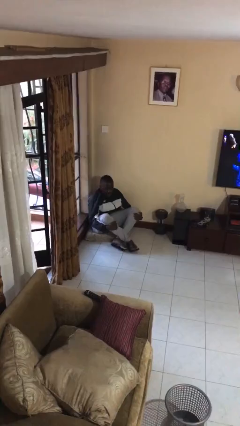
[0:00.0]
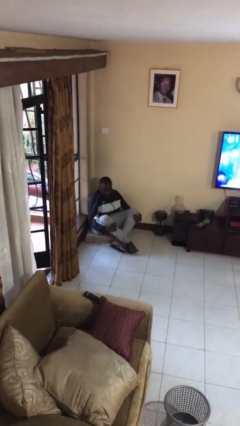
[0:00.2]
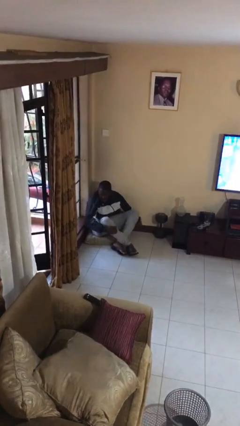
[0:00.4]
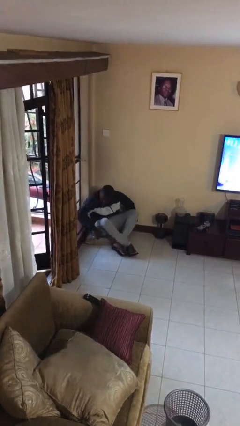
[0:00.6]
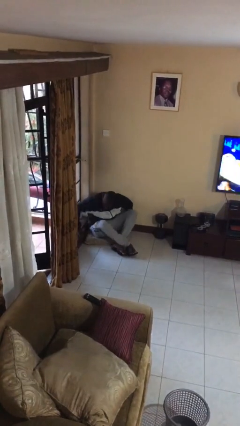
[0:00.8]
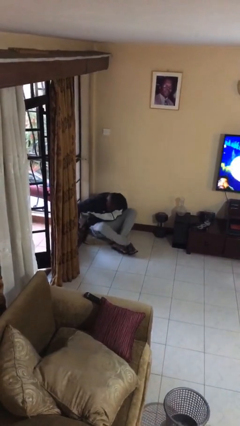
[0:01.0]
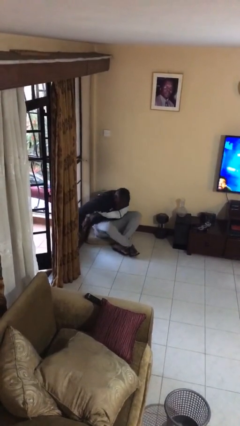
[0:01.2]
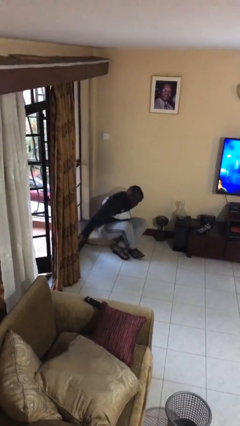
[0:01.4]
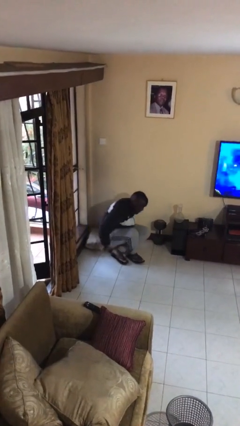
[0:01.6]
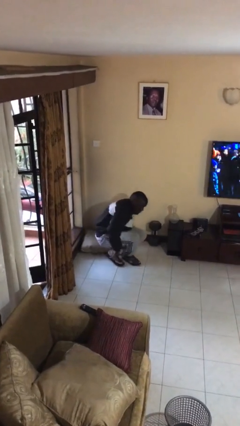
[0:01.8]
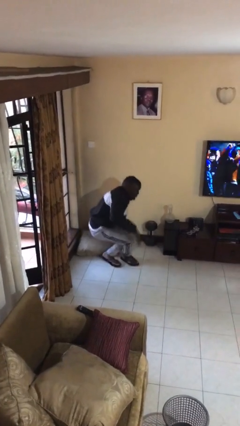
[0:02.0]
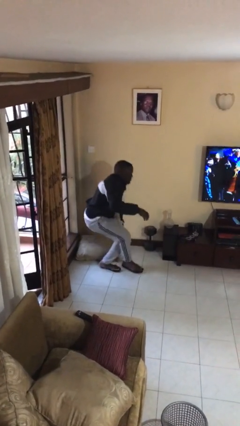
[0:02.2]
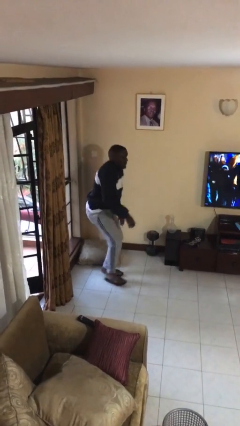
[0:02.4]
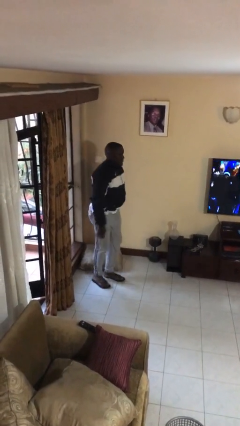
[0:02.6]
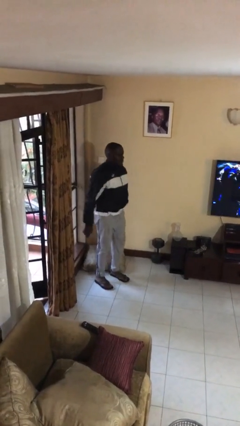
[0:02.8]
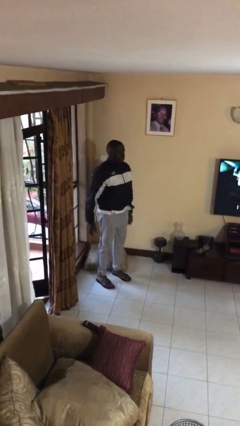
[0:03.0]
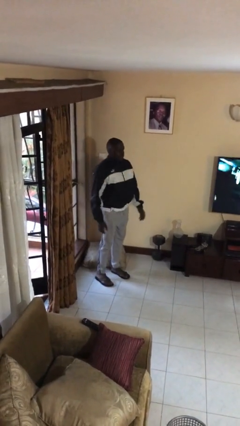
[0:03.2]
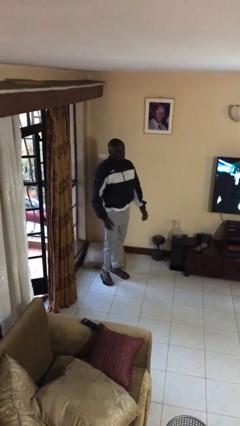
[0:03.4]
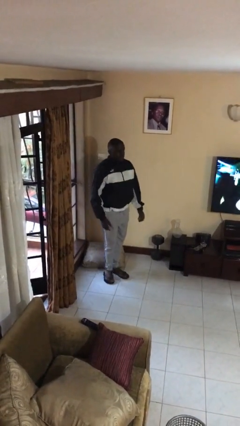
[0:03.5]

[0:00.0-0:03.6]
person stands up from floor

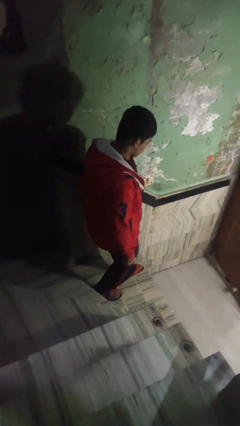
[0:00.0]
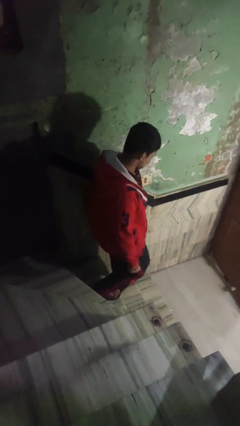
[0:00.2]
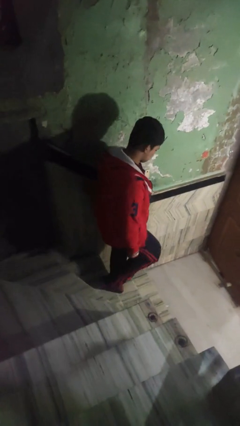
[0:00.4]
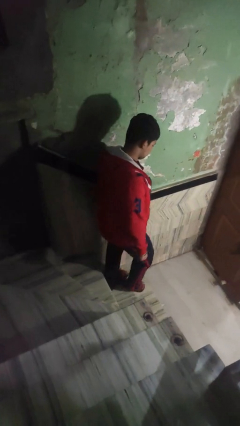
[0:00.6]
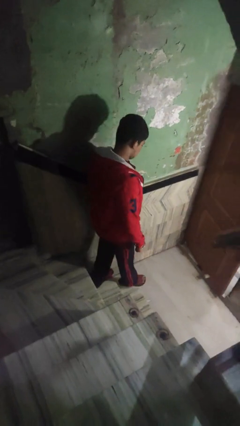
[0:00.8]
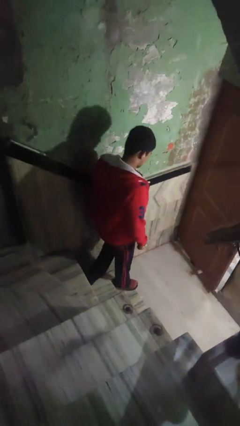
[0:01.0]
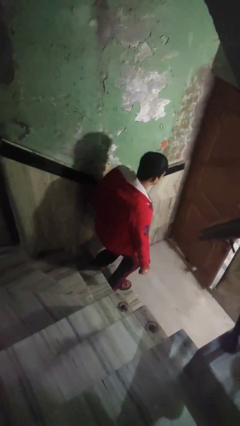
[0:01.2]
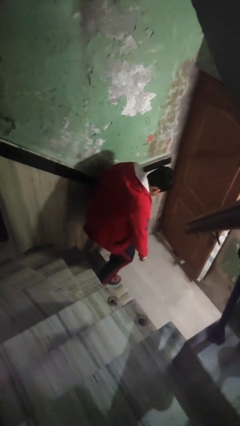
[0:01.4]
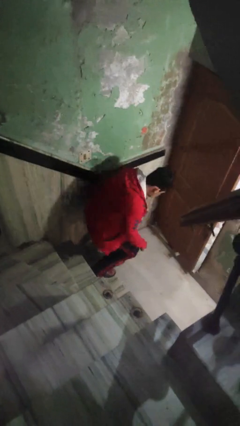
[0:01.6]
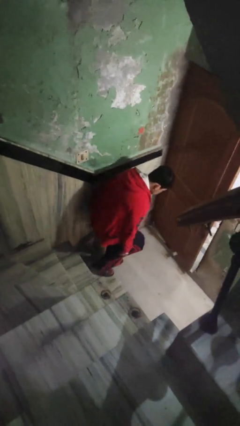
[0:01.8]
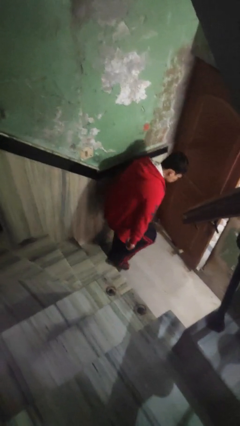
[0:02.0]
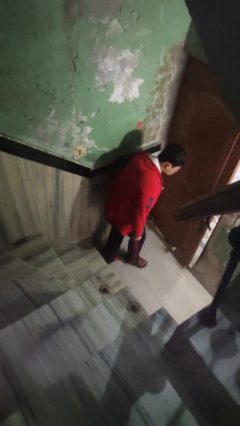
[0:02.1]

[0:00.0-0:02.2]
person climbs down stairs

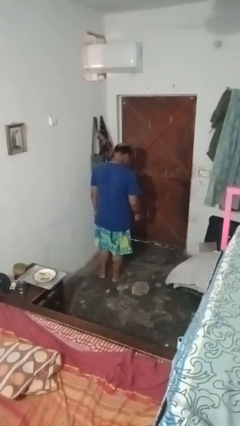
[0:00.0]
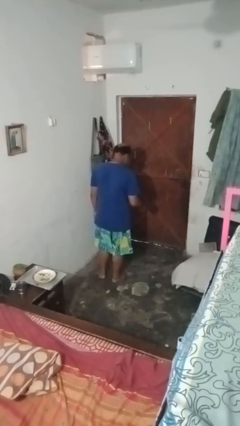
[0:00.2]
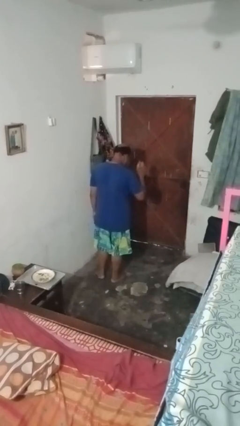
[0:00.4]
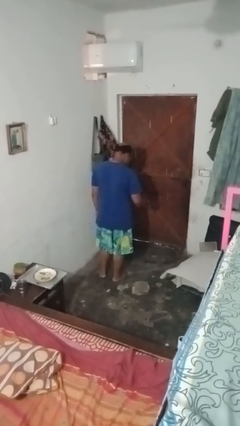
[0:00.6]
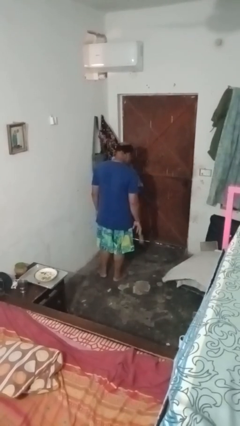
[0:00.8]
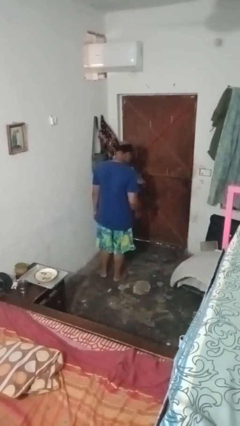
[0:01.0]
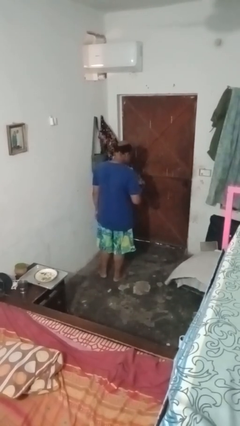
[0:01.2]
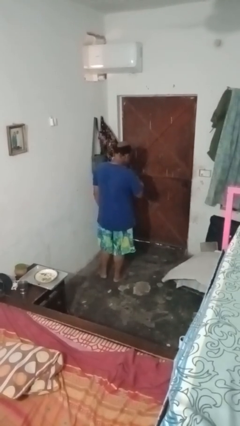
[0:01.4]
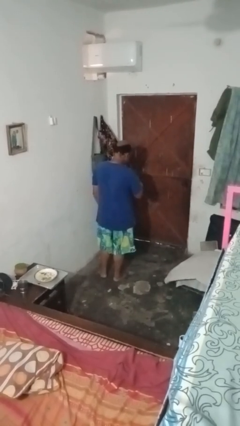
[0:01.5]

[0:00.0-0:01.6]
person bounces ball on floor

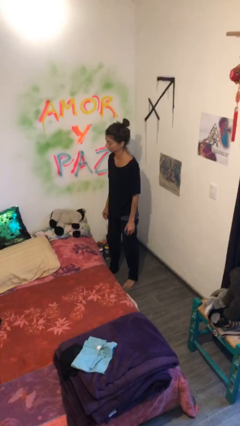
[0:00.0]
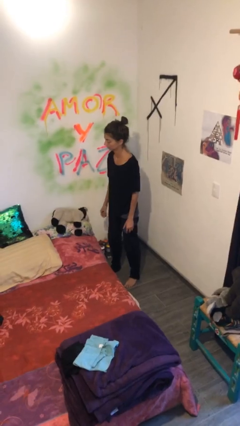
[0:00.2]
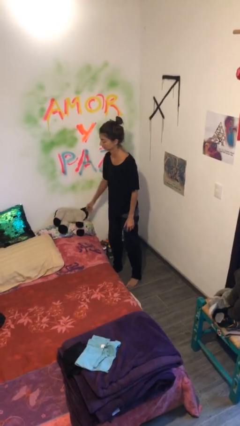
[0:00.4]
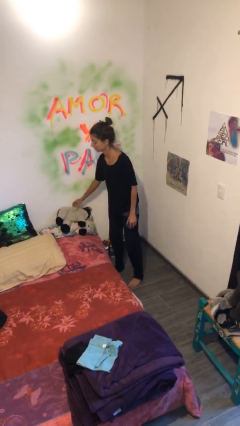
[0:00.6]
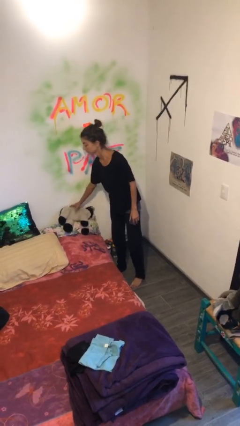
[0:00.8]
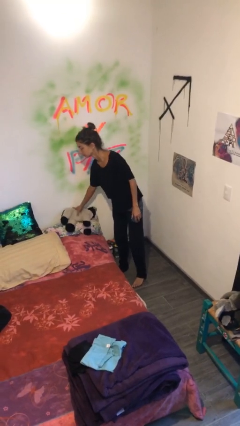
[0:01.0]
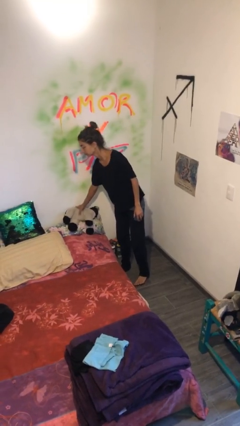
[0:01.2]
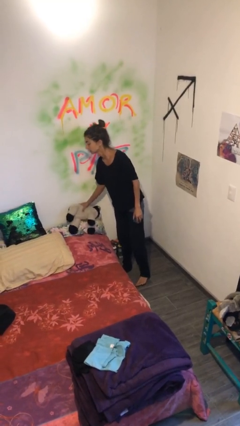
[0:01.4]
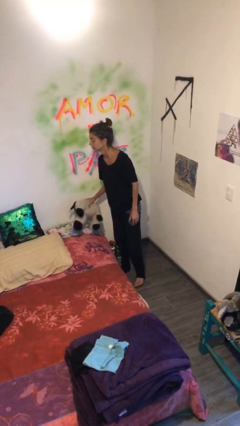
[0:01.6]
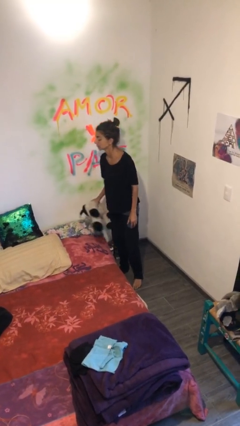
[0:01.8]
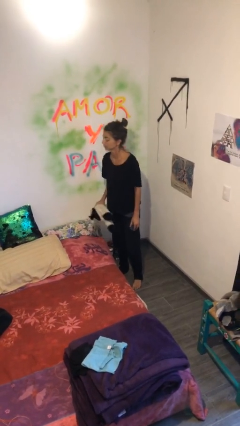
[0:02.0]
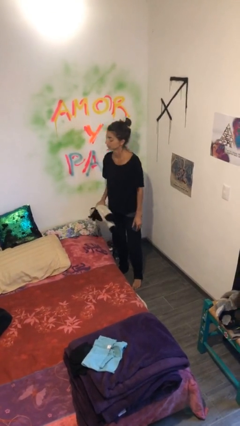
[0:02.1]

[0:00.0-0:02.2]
person picks up object from bed

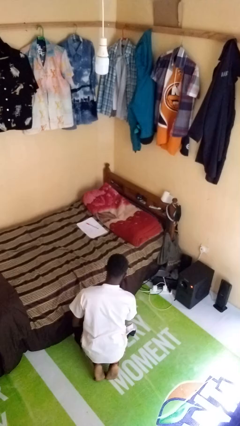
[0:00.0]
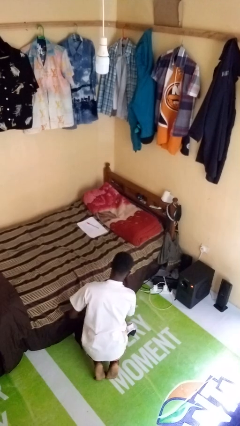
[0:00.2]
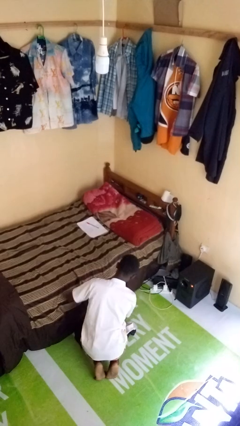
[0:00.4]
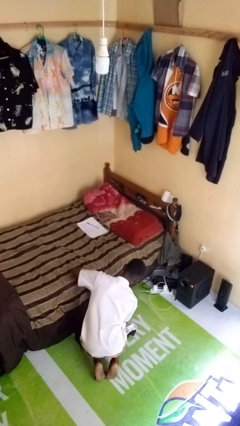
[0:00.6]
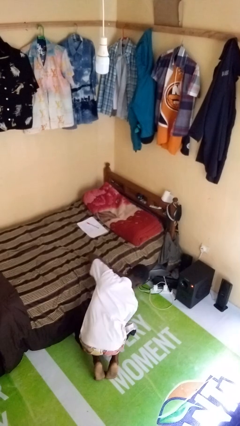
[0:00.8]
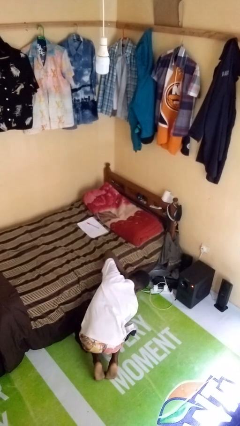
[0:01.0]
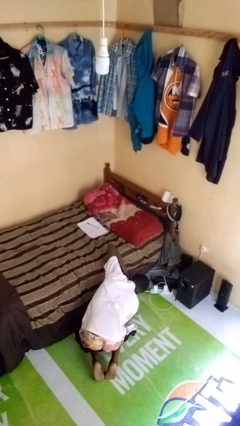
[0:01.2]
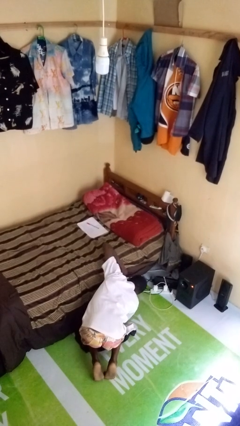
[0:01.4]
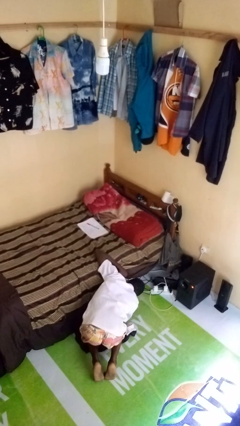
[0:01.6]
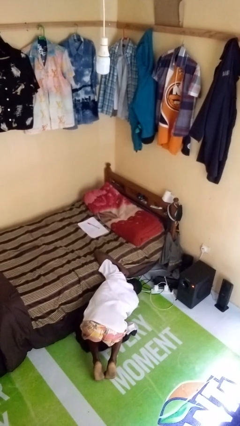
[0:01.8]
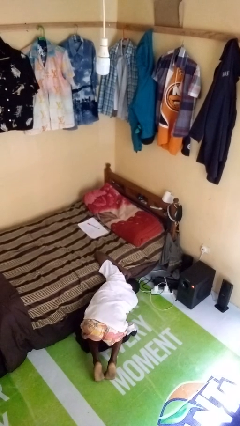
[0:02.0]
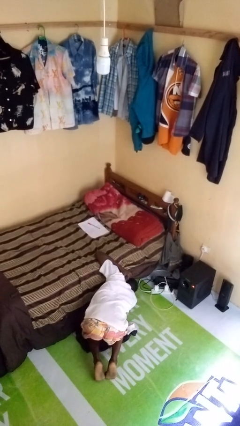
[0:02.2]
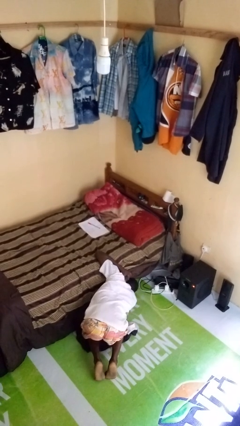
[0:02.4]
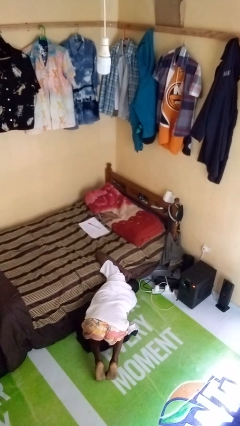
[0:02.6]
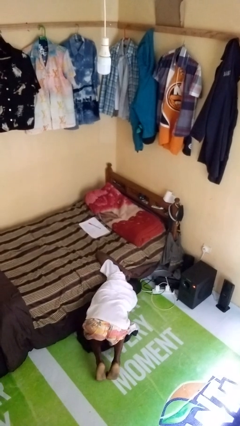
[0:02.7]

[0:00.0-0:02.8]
person searches under bed

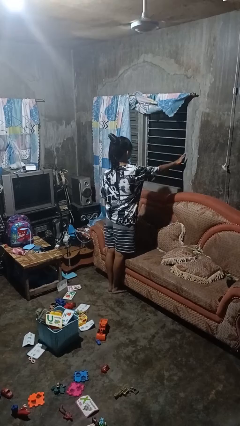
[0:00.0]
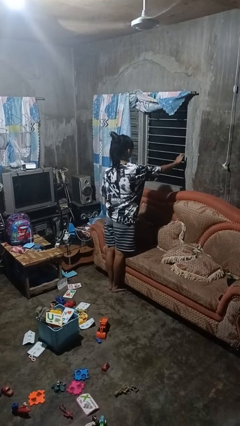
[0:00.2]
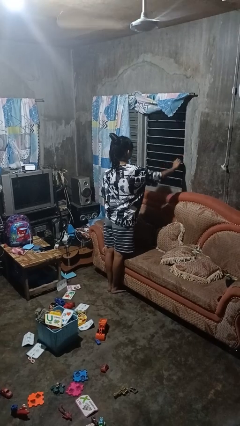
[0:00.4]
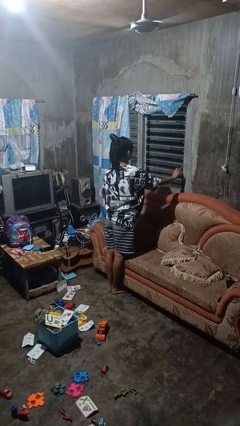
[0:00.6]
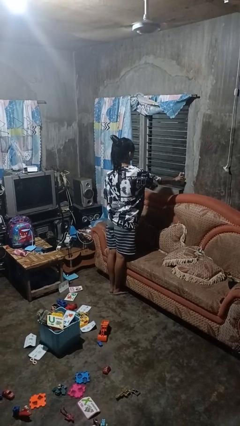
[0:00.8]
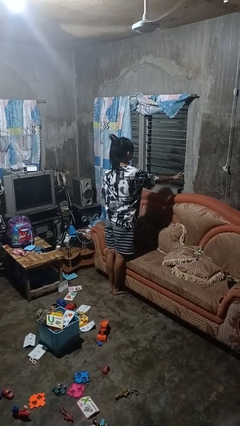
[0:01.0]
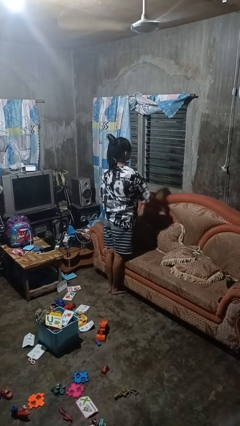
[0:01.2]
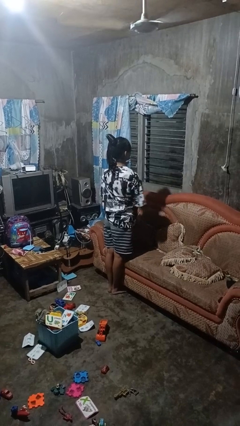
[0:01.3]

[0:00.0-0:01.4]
person opens home window

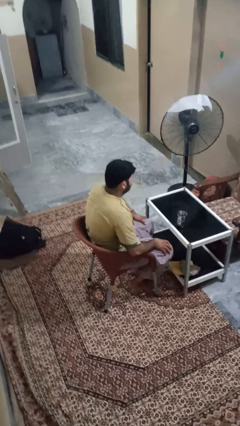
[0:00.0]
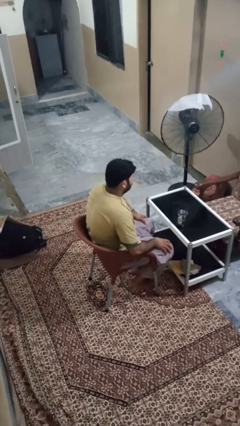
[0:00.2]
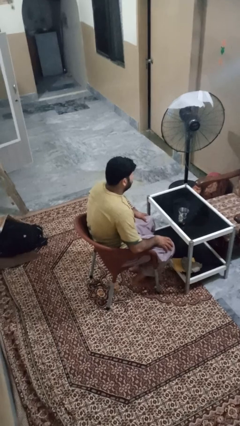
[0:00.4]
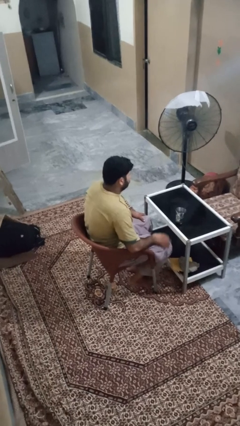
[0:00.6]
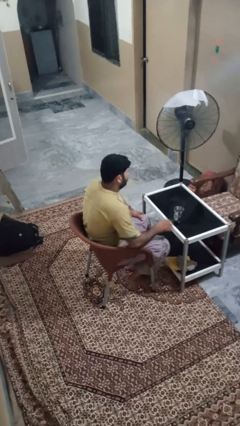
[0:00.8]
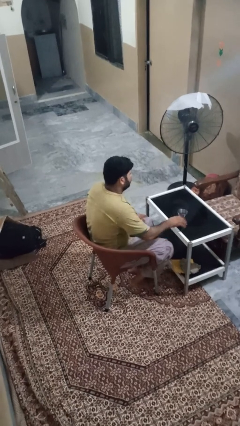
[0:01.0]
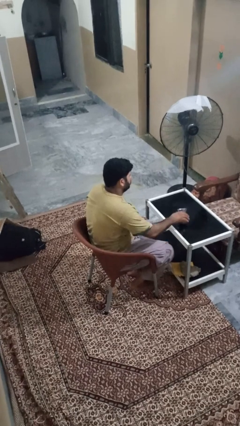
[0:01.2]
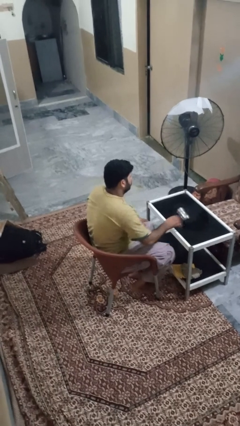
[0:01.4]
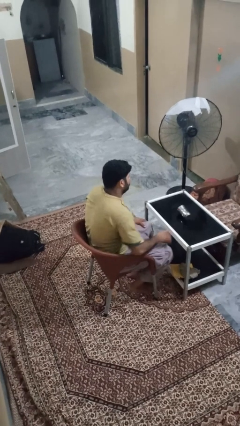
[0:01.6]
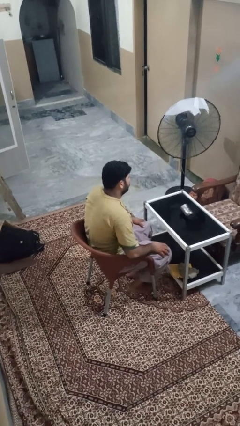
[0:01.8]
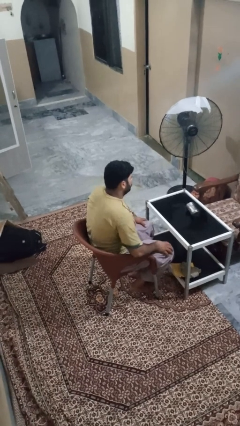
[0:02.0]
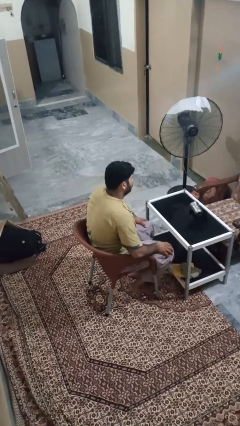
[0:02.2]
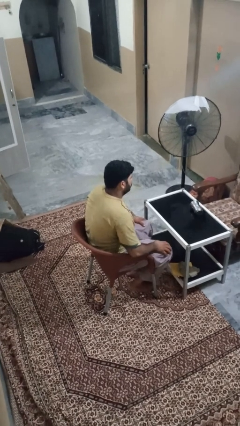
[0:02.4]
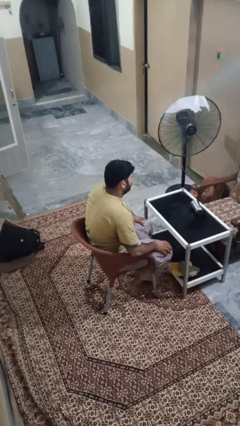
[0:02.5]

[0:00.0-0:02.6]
person knocks over glass

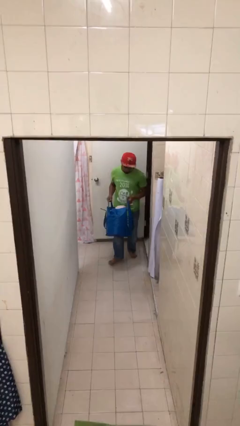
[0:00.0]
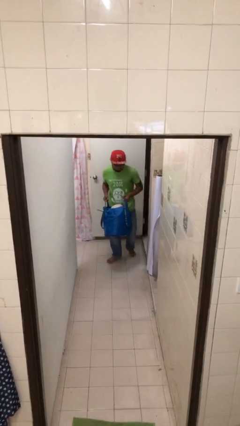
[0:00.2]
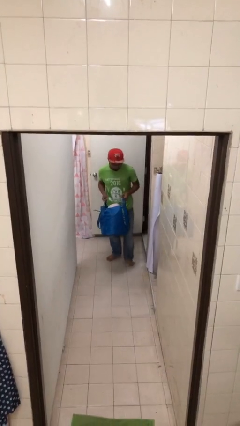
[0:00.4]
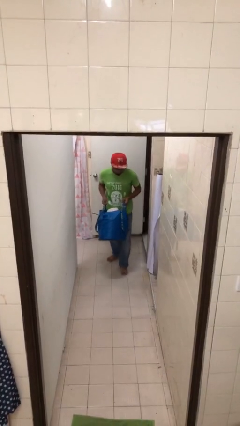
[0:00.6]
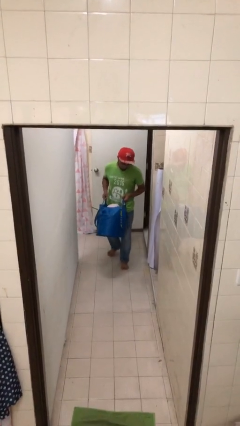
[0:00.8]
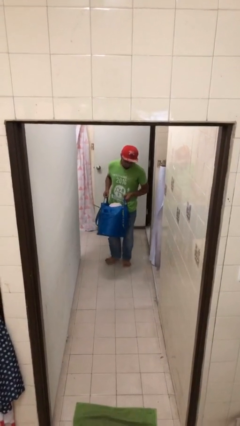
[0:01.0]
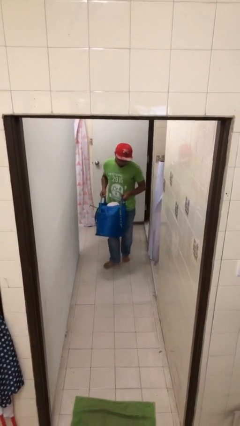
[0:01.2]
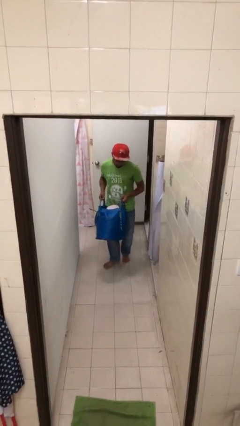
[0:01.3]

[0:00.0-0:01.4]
person carries heavy object
